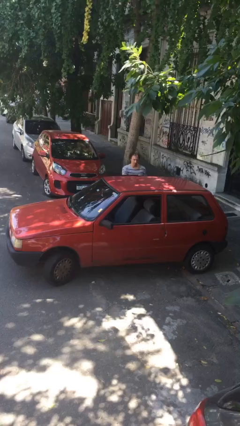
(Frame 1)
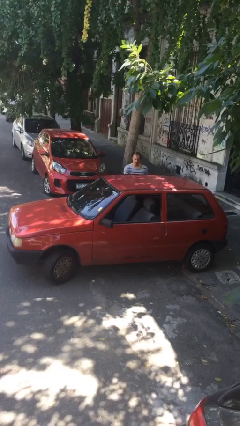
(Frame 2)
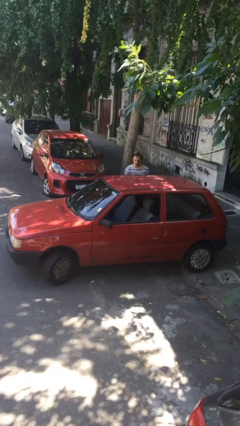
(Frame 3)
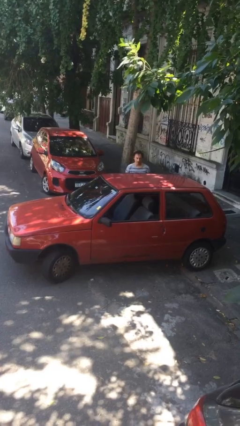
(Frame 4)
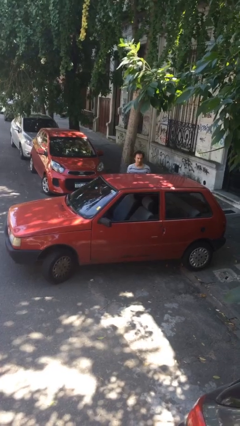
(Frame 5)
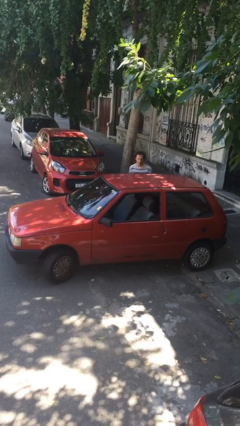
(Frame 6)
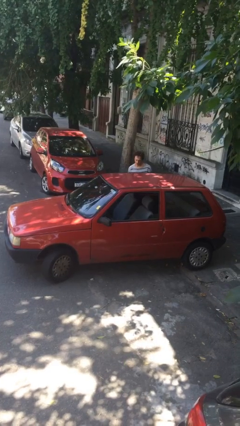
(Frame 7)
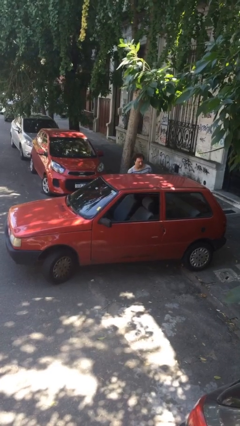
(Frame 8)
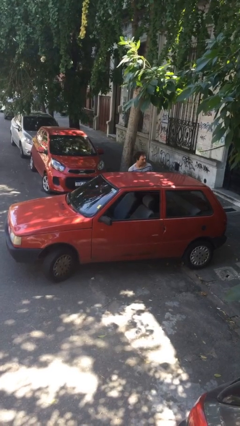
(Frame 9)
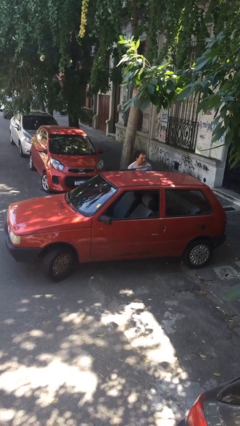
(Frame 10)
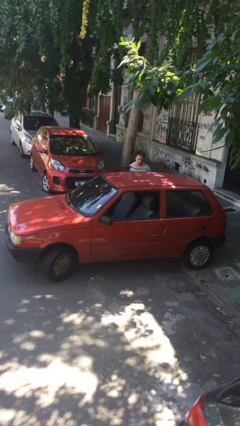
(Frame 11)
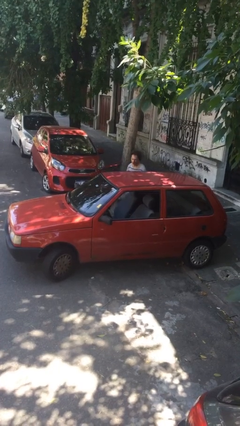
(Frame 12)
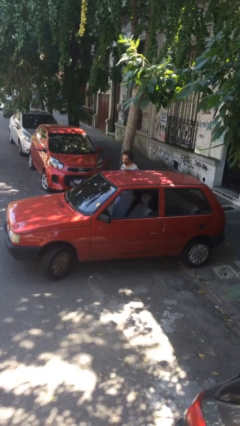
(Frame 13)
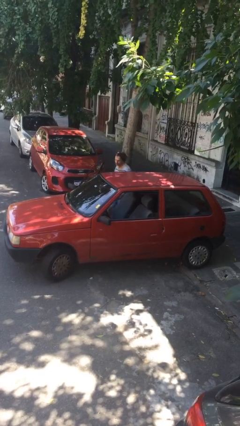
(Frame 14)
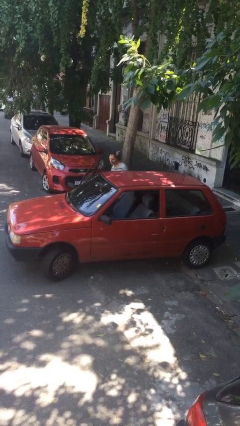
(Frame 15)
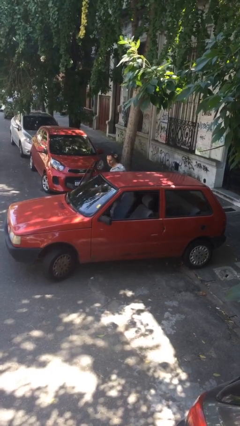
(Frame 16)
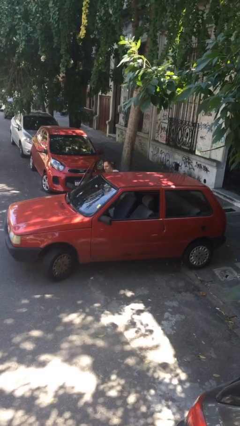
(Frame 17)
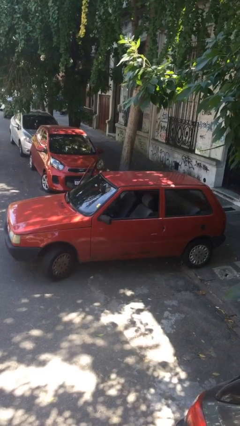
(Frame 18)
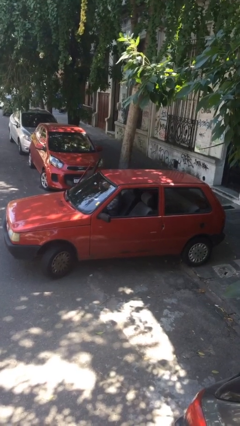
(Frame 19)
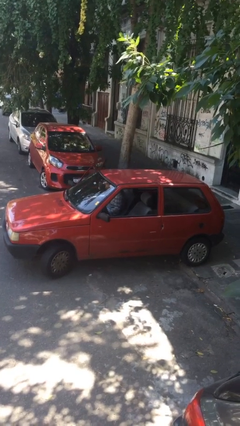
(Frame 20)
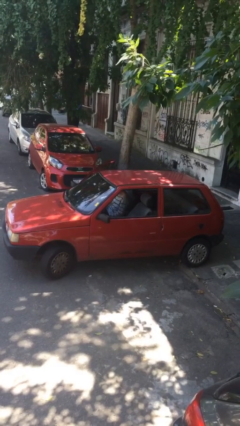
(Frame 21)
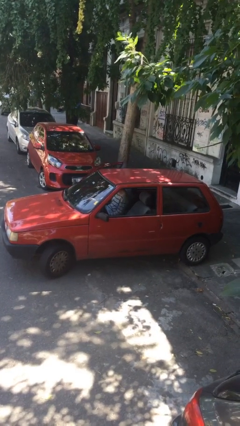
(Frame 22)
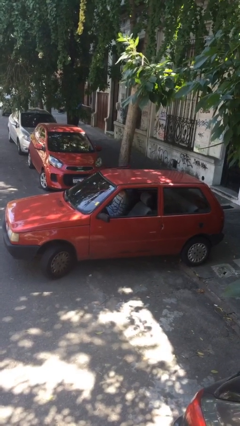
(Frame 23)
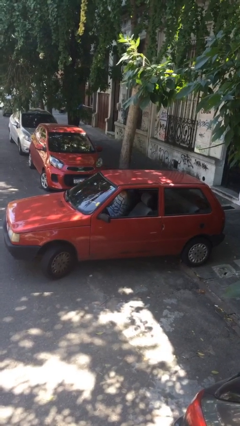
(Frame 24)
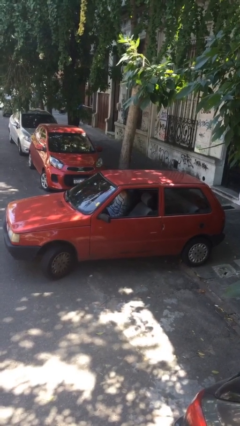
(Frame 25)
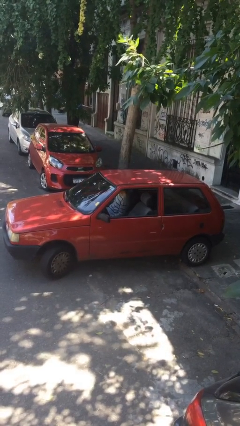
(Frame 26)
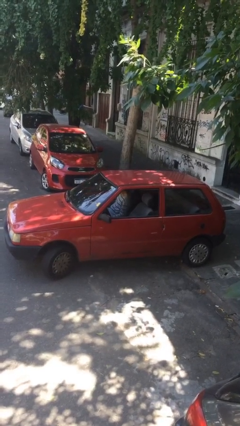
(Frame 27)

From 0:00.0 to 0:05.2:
car picks up person

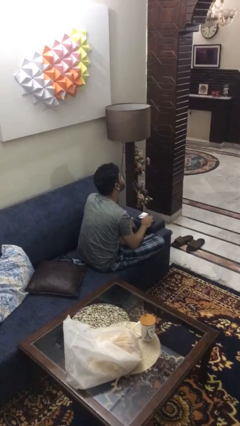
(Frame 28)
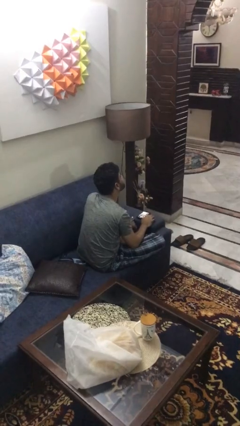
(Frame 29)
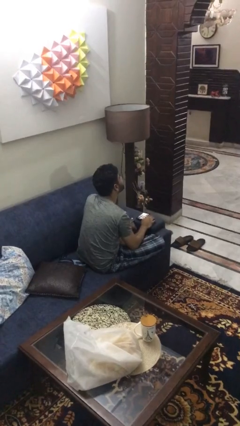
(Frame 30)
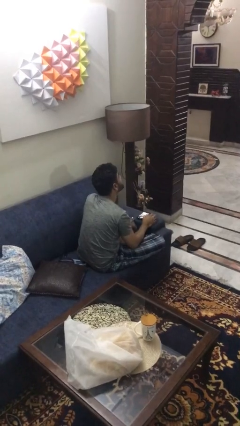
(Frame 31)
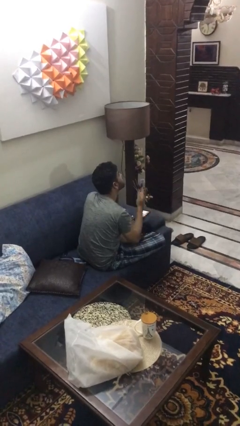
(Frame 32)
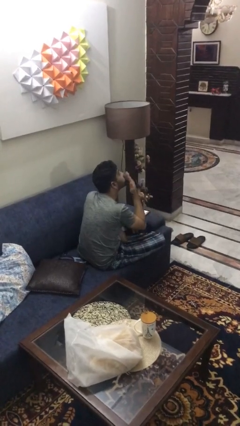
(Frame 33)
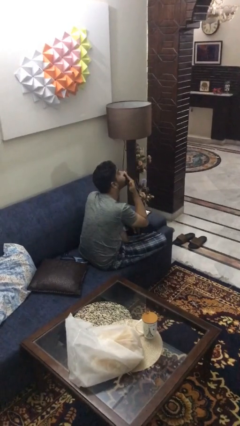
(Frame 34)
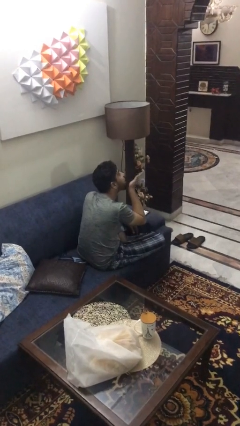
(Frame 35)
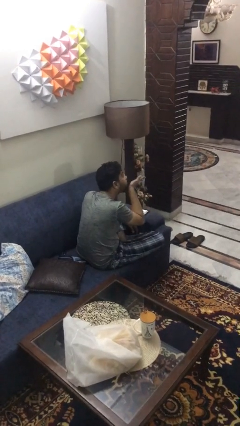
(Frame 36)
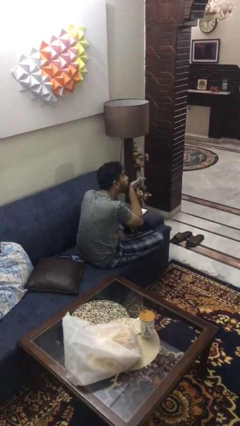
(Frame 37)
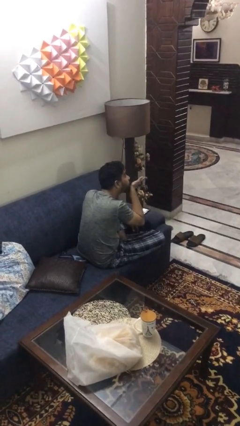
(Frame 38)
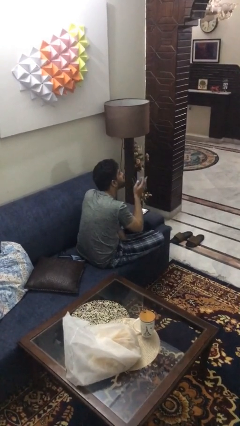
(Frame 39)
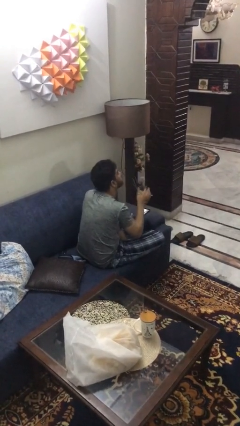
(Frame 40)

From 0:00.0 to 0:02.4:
person gestures blow kiss

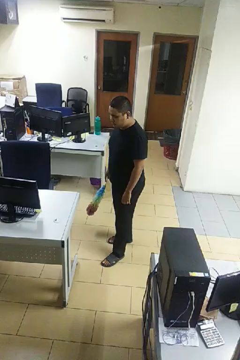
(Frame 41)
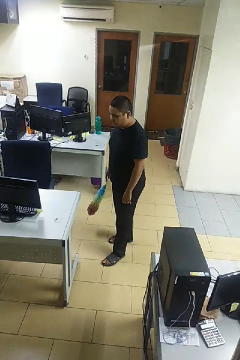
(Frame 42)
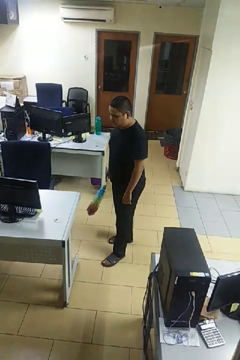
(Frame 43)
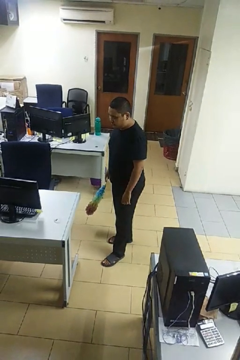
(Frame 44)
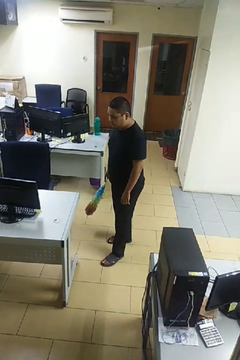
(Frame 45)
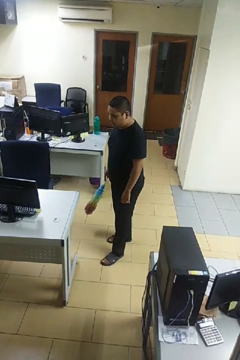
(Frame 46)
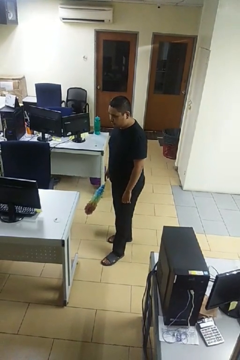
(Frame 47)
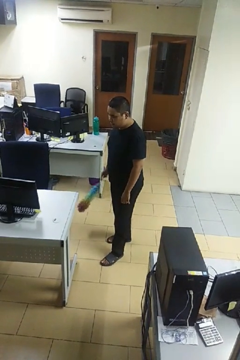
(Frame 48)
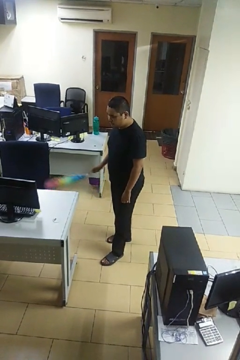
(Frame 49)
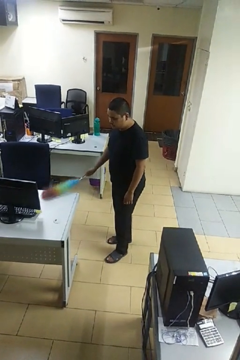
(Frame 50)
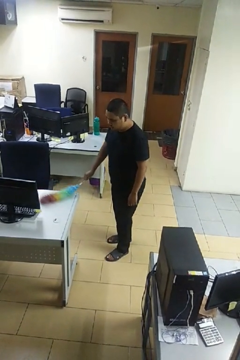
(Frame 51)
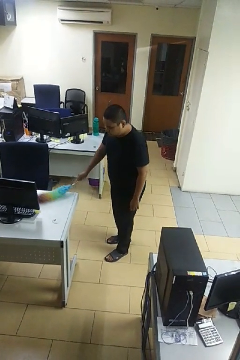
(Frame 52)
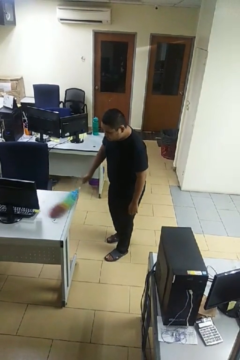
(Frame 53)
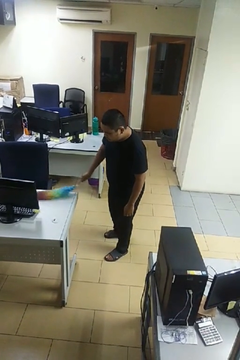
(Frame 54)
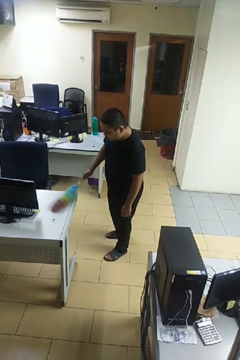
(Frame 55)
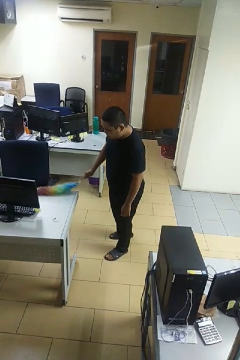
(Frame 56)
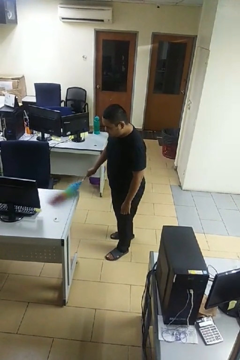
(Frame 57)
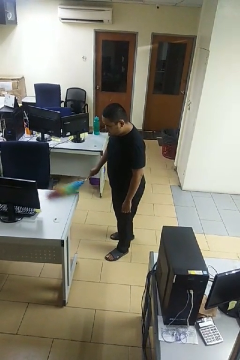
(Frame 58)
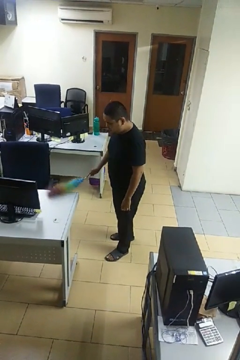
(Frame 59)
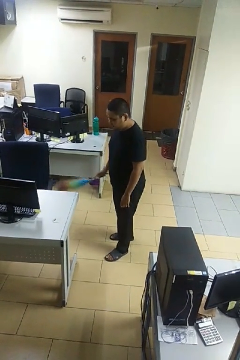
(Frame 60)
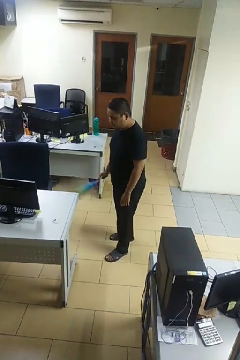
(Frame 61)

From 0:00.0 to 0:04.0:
person dusts furniture

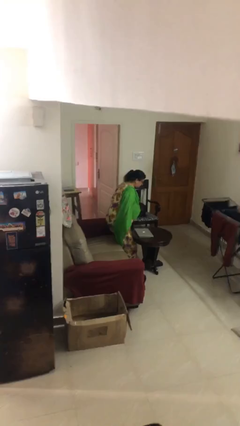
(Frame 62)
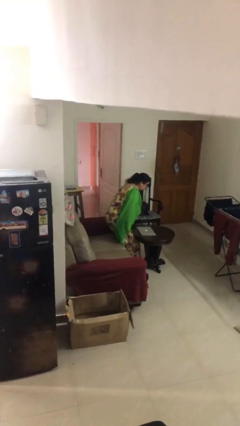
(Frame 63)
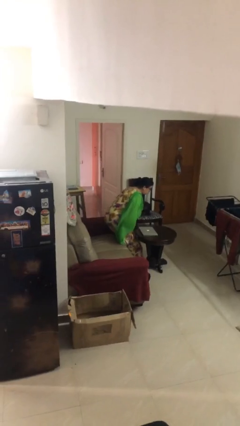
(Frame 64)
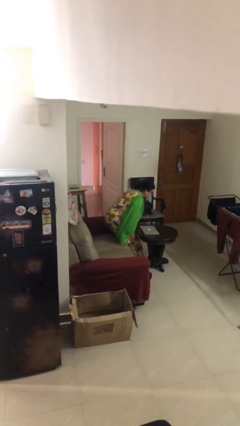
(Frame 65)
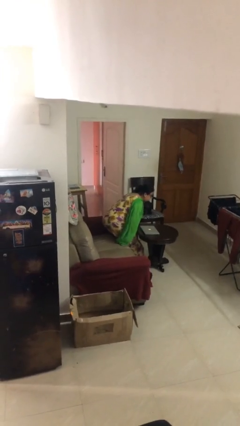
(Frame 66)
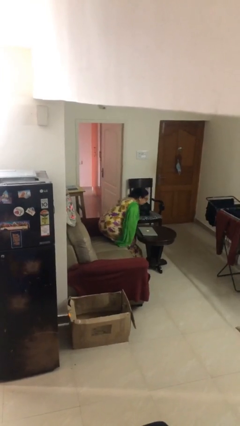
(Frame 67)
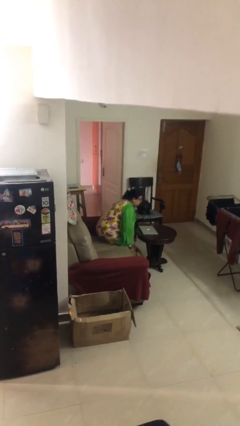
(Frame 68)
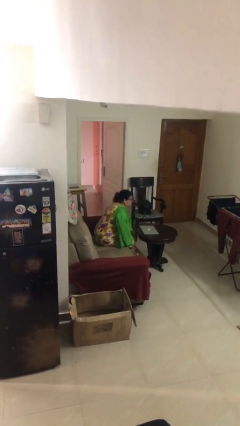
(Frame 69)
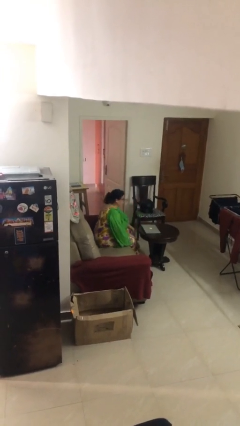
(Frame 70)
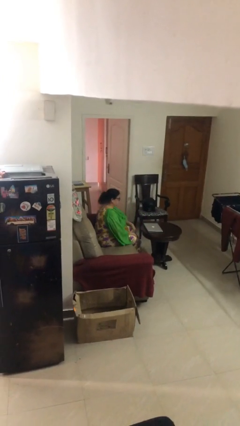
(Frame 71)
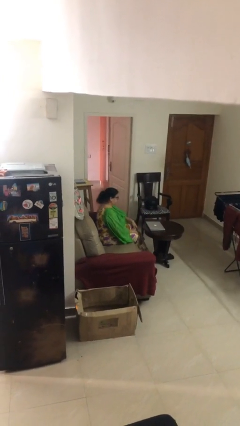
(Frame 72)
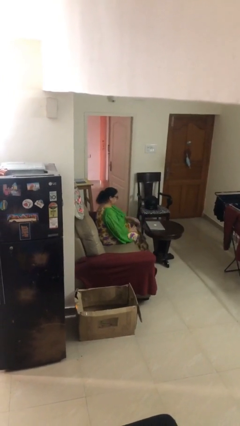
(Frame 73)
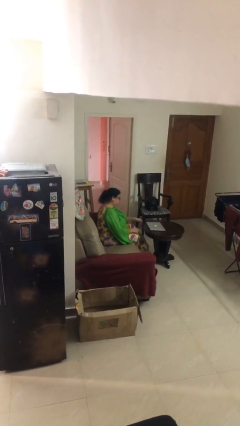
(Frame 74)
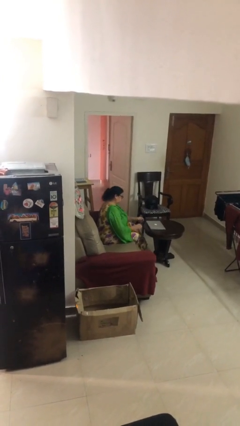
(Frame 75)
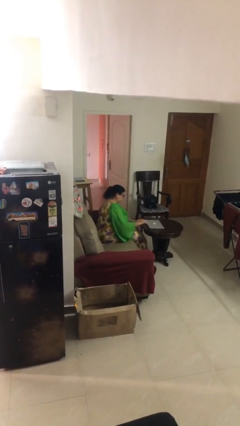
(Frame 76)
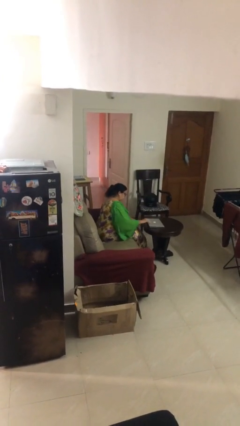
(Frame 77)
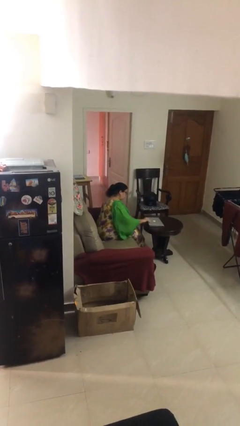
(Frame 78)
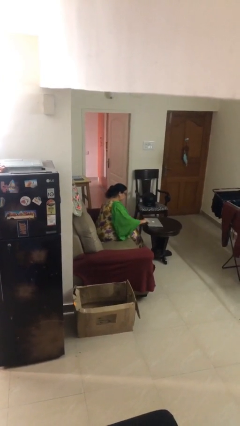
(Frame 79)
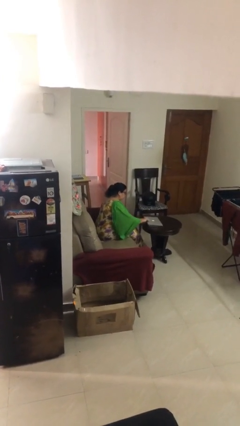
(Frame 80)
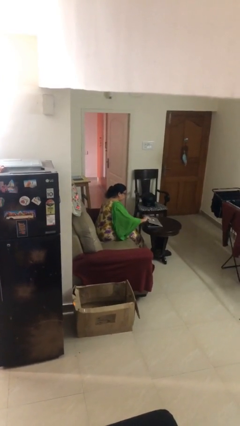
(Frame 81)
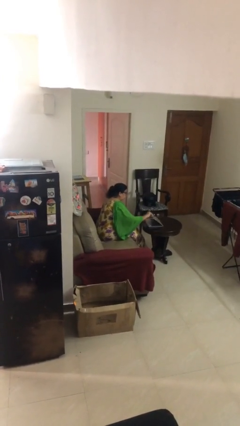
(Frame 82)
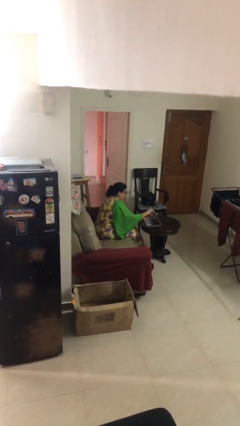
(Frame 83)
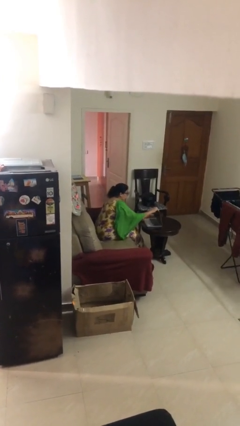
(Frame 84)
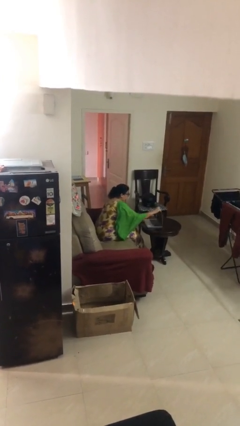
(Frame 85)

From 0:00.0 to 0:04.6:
person sits down

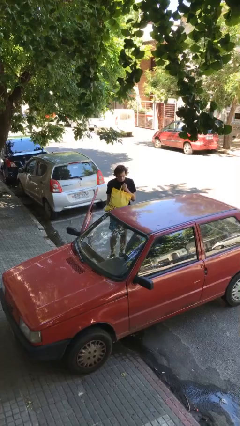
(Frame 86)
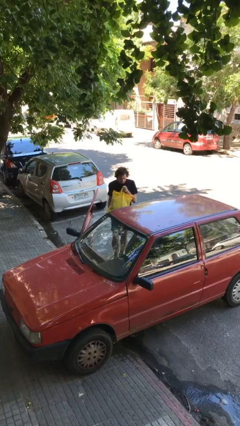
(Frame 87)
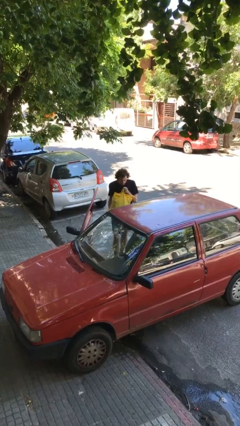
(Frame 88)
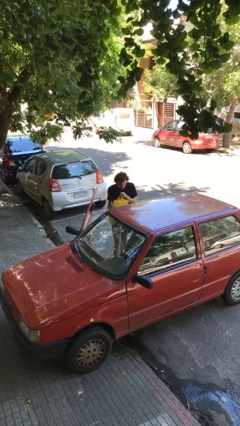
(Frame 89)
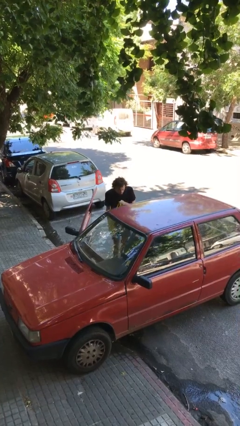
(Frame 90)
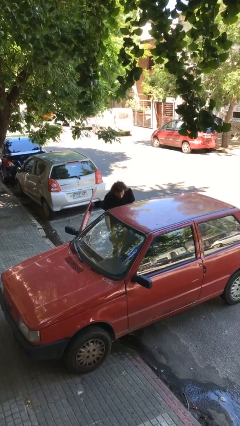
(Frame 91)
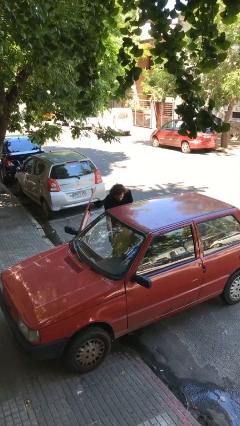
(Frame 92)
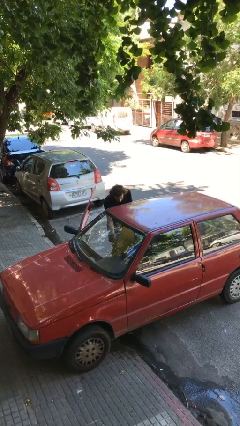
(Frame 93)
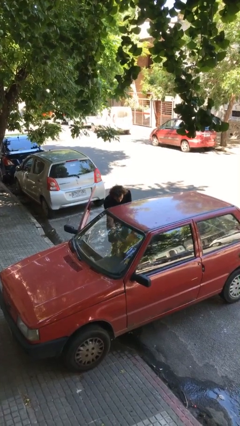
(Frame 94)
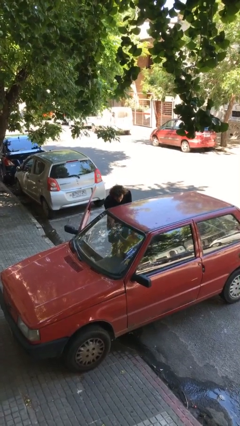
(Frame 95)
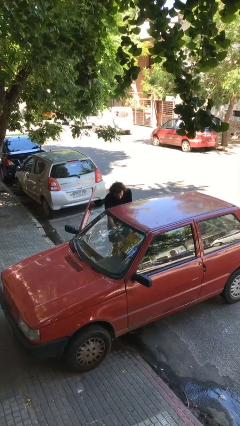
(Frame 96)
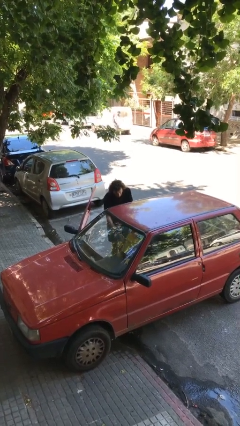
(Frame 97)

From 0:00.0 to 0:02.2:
person loads car
